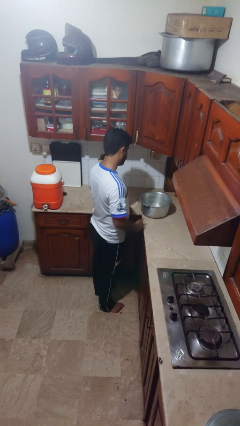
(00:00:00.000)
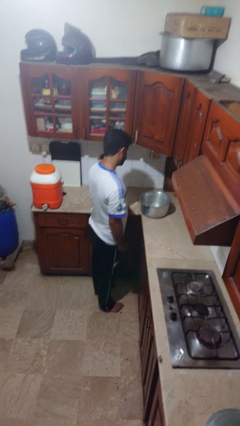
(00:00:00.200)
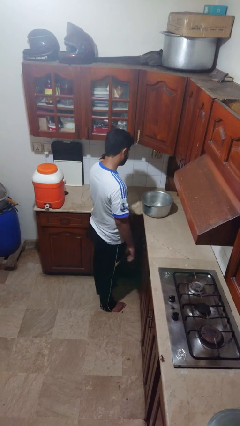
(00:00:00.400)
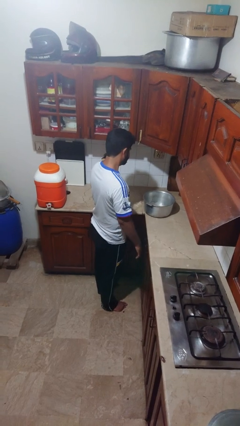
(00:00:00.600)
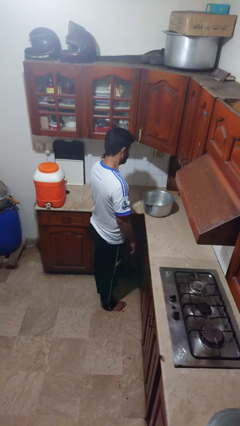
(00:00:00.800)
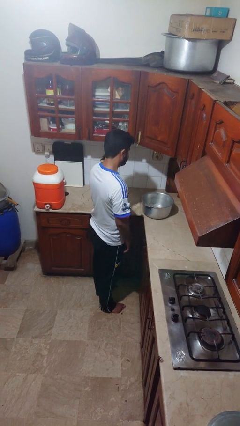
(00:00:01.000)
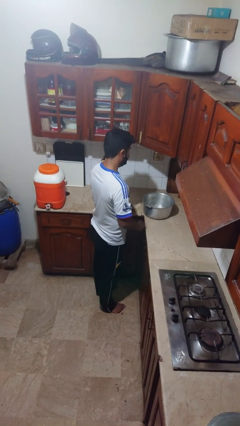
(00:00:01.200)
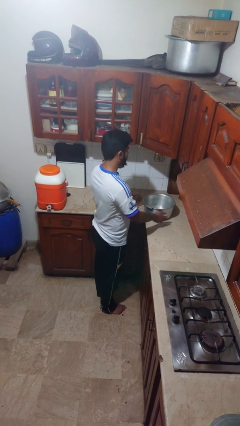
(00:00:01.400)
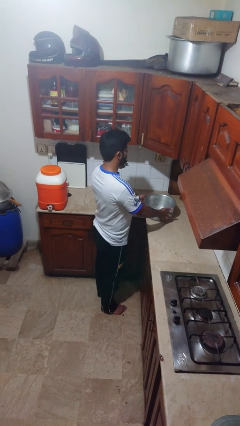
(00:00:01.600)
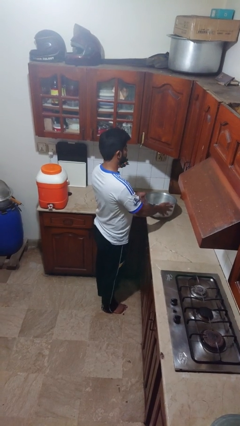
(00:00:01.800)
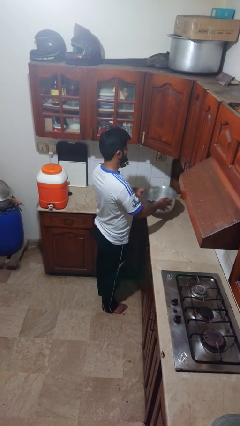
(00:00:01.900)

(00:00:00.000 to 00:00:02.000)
person picks up object from countertop

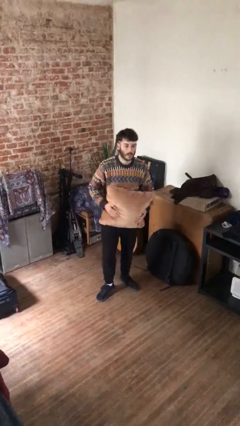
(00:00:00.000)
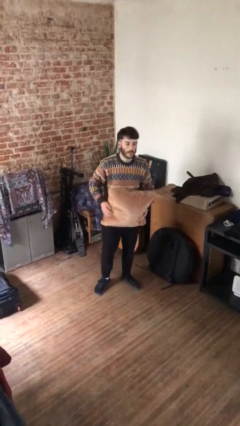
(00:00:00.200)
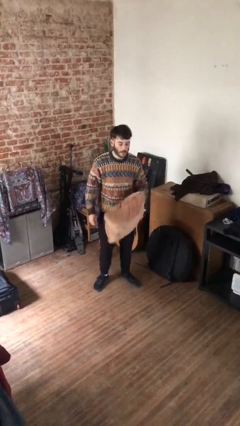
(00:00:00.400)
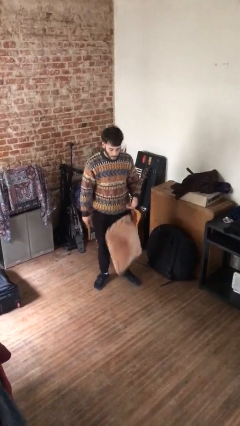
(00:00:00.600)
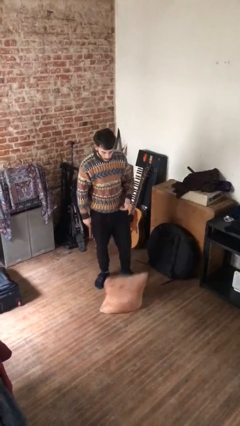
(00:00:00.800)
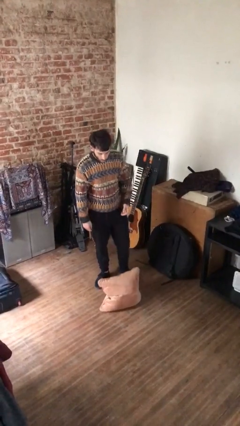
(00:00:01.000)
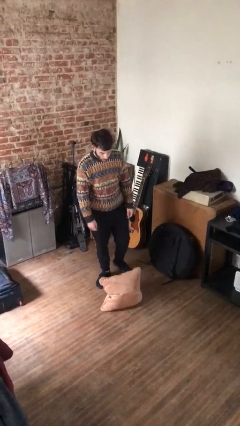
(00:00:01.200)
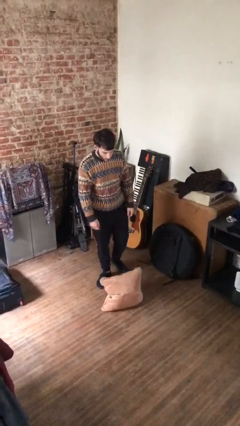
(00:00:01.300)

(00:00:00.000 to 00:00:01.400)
person drops object

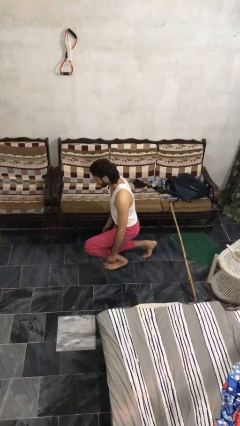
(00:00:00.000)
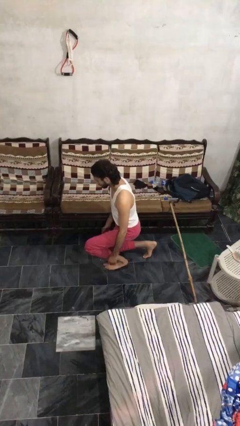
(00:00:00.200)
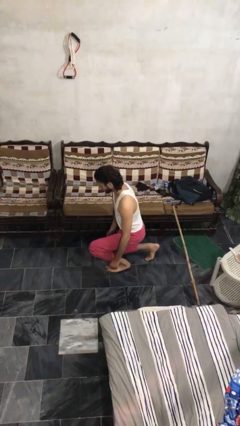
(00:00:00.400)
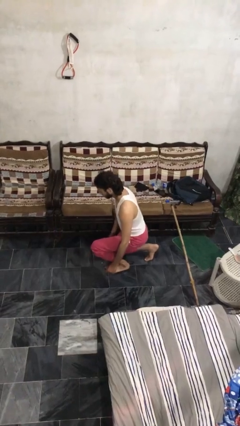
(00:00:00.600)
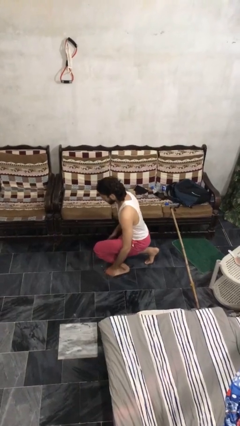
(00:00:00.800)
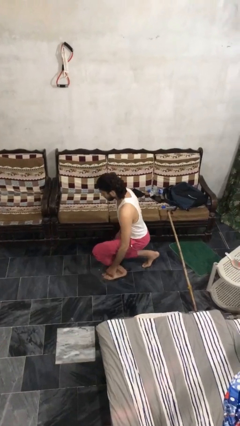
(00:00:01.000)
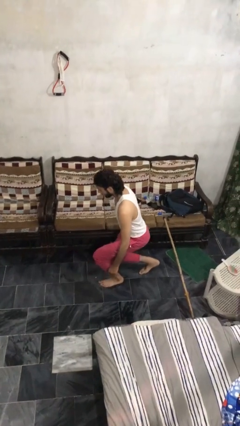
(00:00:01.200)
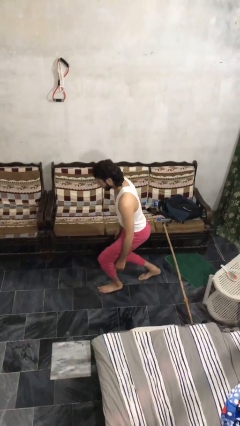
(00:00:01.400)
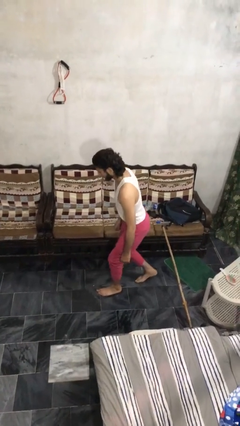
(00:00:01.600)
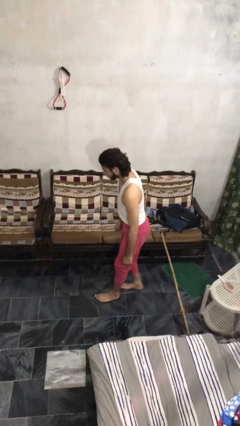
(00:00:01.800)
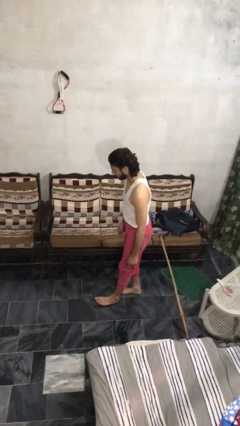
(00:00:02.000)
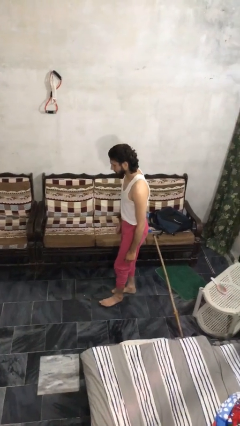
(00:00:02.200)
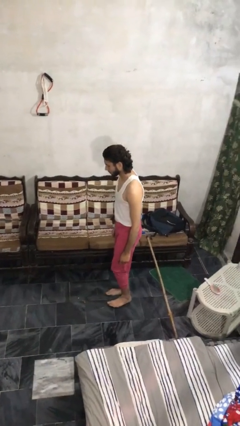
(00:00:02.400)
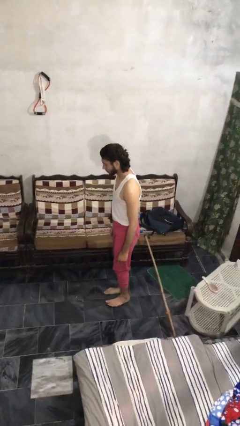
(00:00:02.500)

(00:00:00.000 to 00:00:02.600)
person stands up from floor

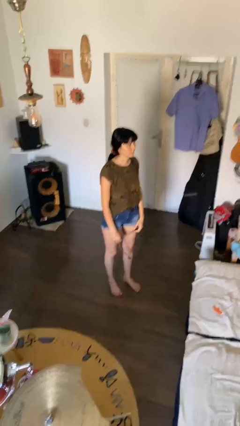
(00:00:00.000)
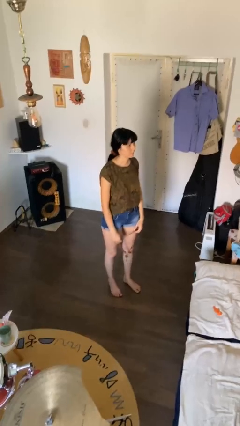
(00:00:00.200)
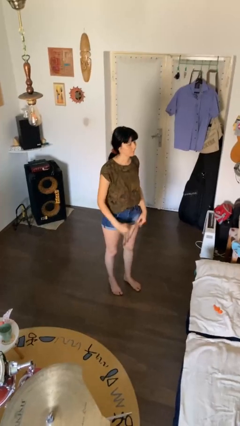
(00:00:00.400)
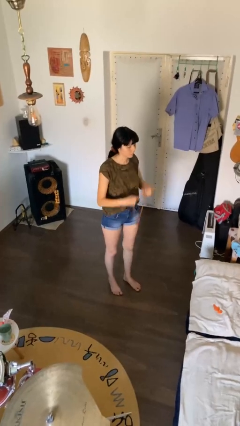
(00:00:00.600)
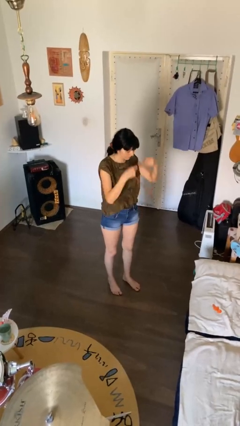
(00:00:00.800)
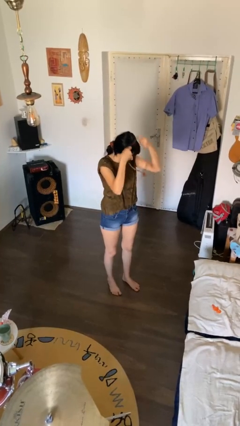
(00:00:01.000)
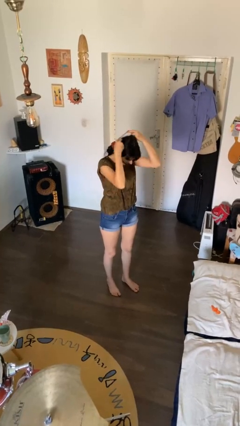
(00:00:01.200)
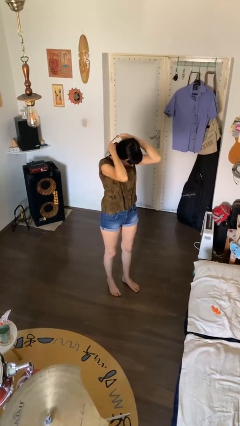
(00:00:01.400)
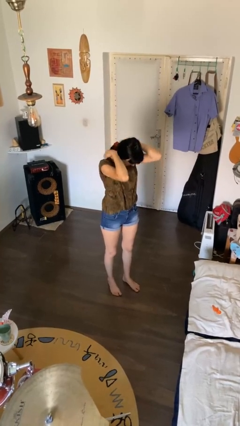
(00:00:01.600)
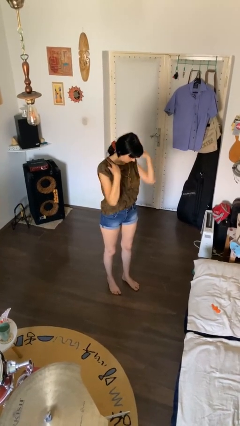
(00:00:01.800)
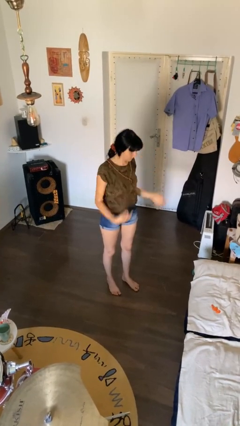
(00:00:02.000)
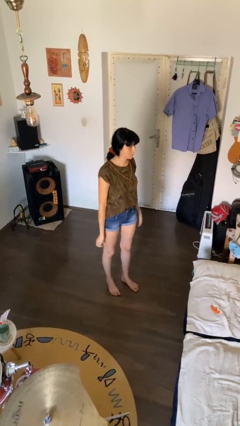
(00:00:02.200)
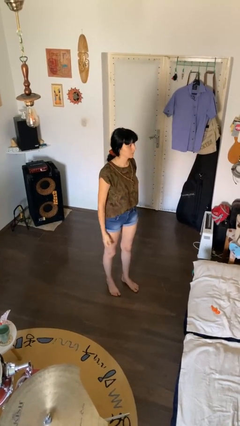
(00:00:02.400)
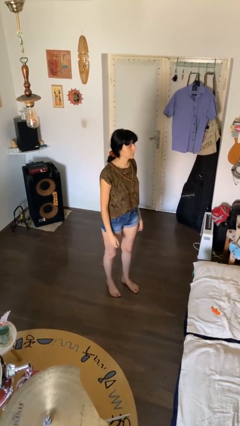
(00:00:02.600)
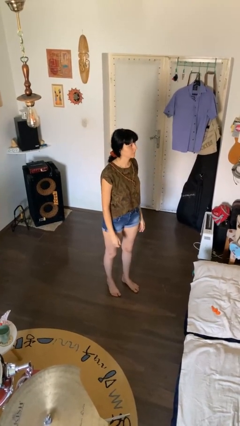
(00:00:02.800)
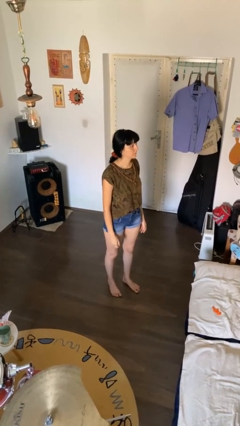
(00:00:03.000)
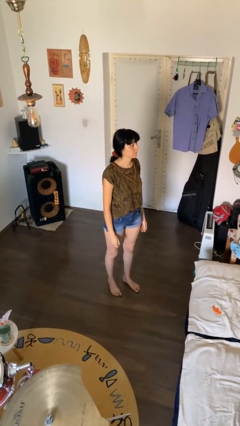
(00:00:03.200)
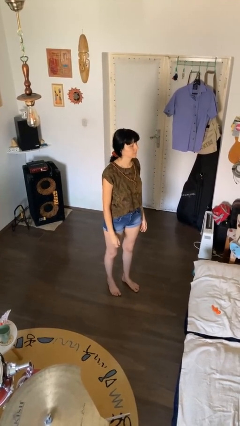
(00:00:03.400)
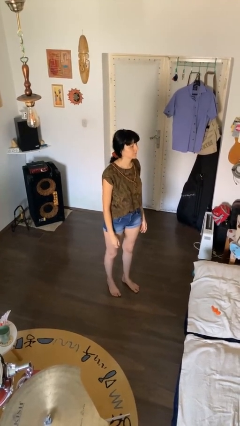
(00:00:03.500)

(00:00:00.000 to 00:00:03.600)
person puts on necklace

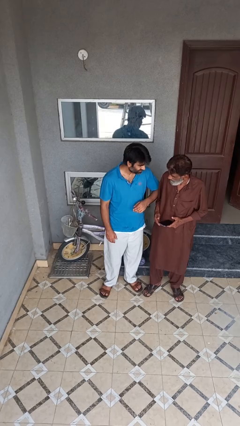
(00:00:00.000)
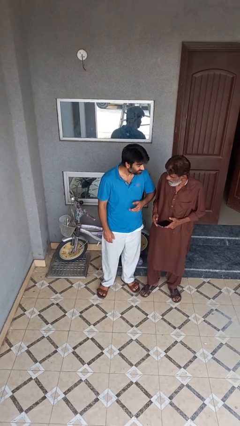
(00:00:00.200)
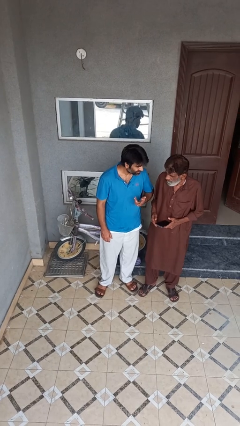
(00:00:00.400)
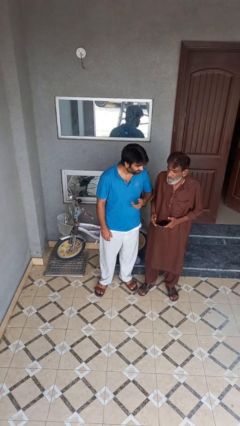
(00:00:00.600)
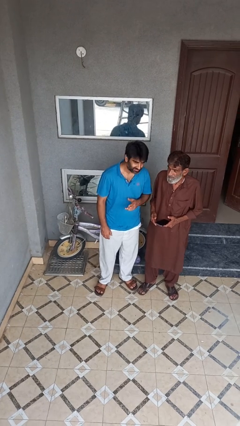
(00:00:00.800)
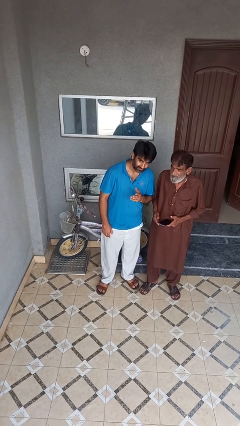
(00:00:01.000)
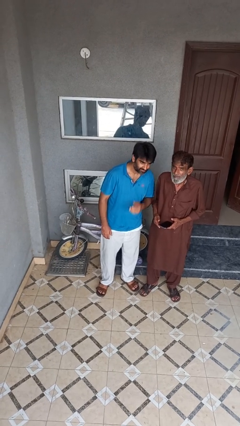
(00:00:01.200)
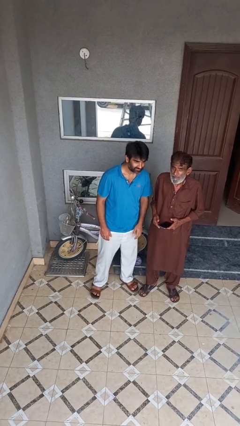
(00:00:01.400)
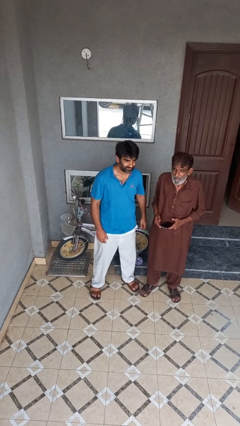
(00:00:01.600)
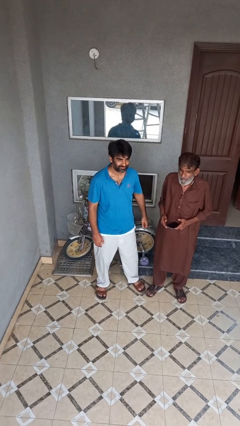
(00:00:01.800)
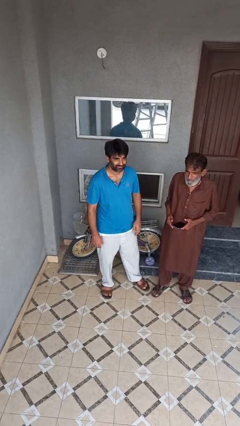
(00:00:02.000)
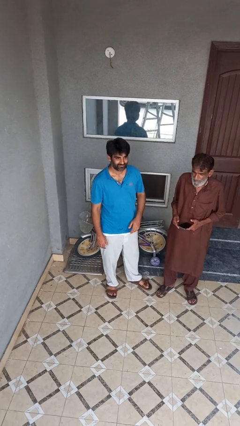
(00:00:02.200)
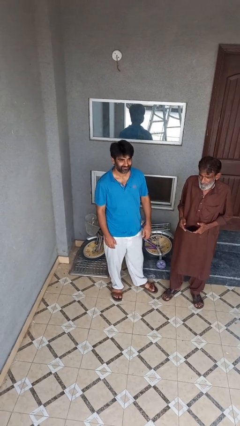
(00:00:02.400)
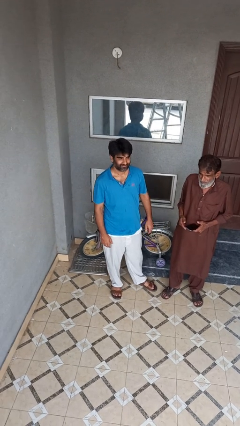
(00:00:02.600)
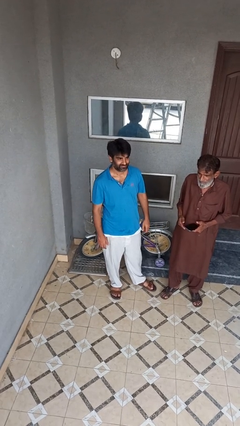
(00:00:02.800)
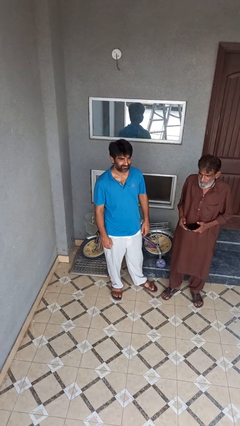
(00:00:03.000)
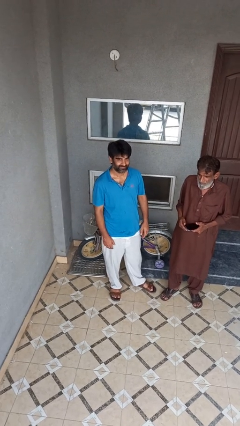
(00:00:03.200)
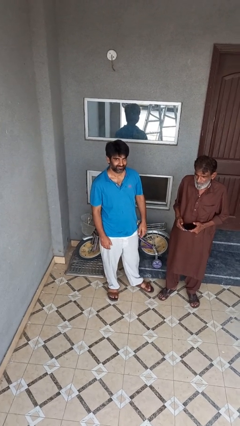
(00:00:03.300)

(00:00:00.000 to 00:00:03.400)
person kisses cheek of person

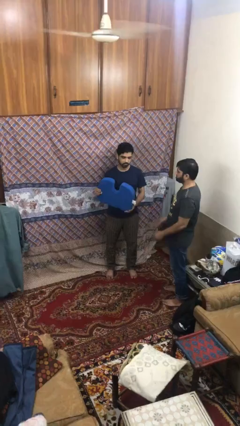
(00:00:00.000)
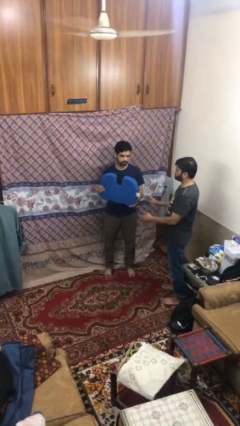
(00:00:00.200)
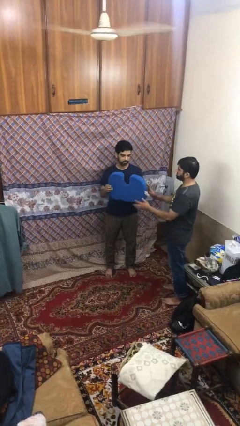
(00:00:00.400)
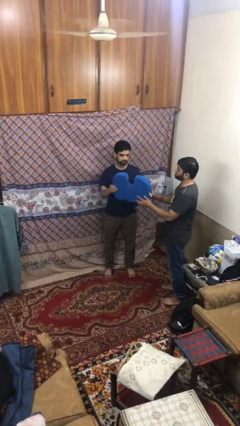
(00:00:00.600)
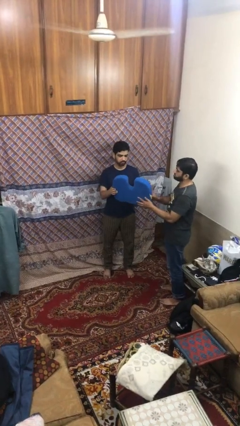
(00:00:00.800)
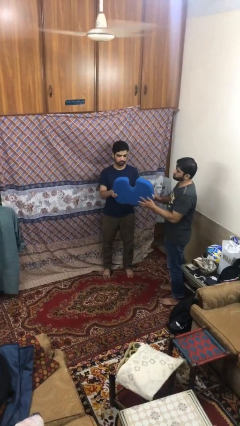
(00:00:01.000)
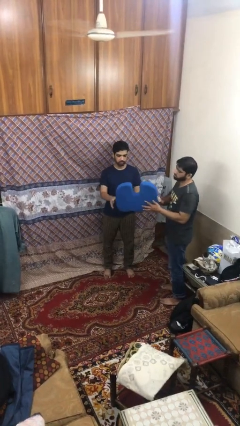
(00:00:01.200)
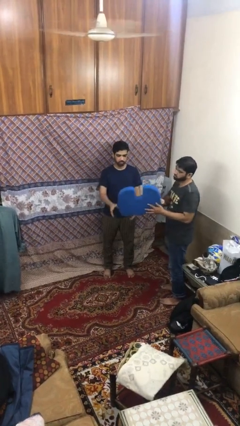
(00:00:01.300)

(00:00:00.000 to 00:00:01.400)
person transfers object to person

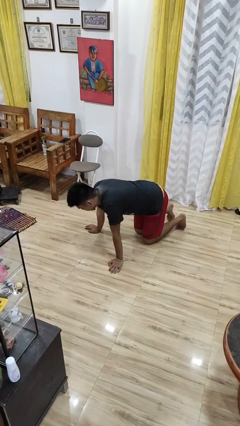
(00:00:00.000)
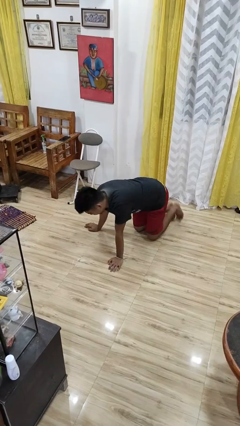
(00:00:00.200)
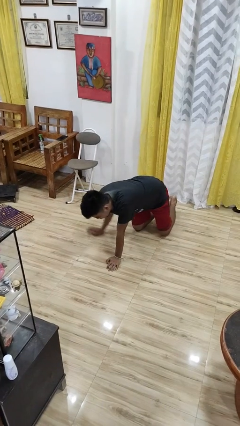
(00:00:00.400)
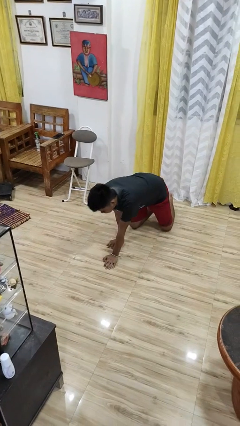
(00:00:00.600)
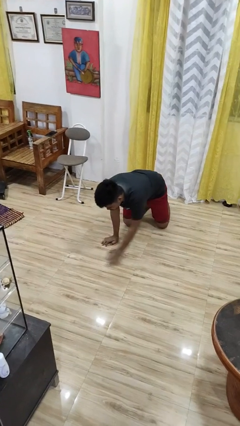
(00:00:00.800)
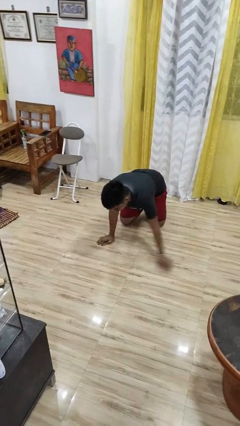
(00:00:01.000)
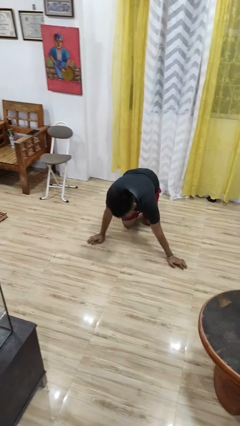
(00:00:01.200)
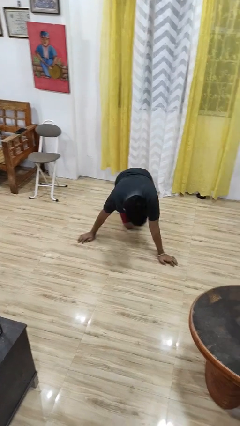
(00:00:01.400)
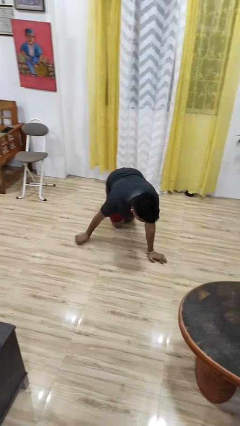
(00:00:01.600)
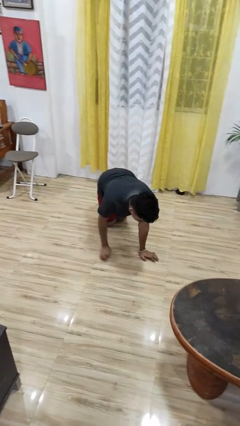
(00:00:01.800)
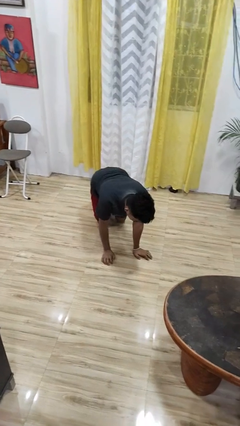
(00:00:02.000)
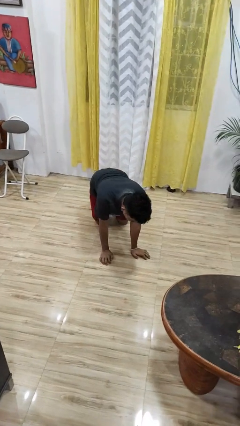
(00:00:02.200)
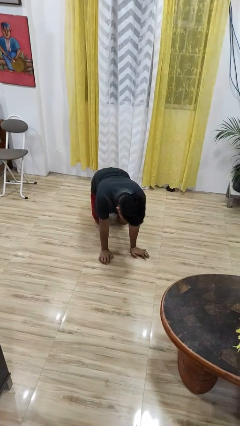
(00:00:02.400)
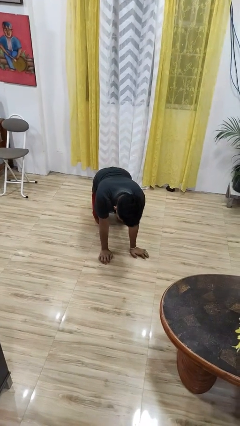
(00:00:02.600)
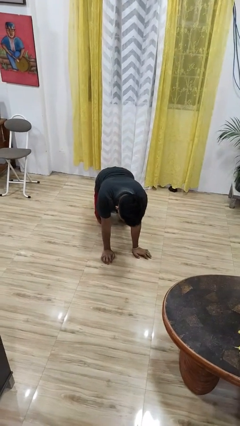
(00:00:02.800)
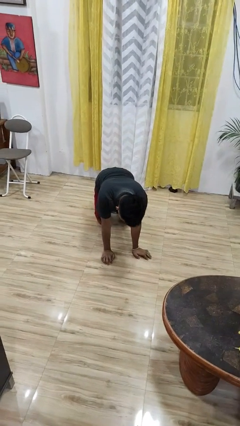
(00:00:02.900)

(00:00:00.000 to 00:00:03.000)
person crawls
